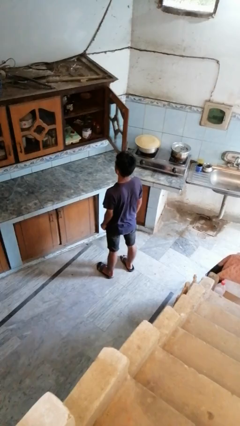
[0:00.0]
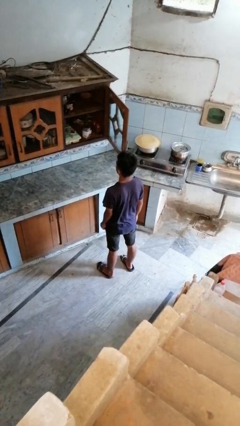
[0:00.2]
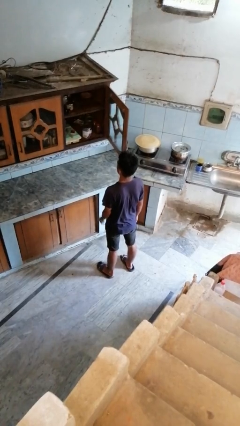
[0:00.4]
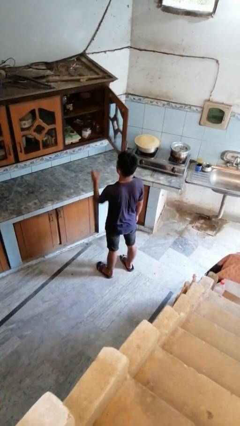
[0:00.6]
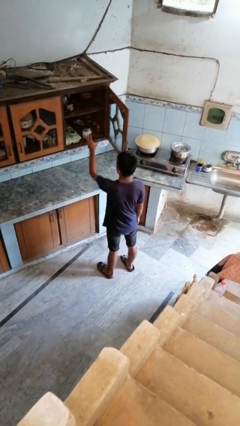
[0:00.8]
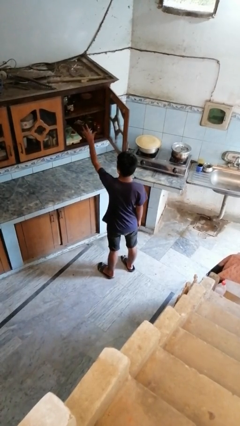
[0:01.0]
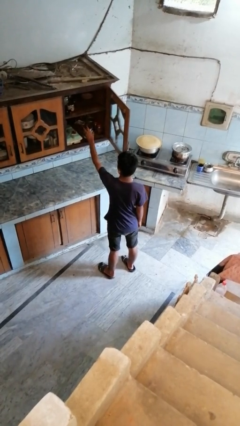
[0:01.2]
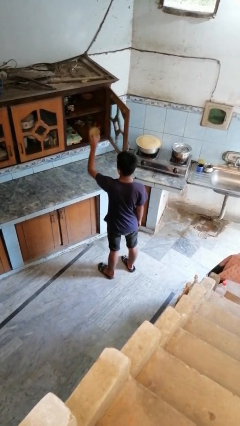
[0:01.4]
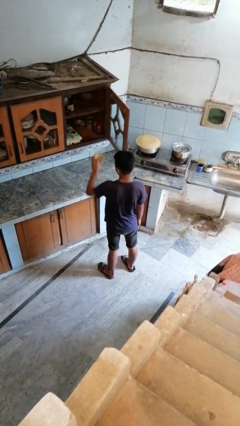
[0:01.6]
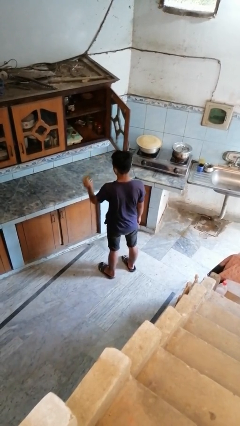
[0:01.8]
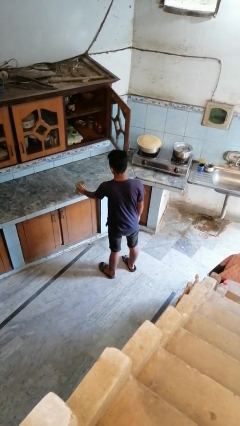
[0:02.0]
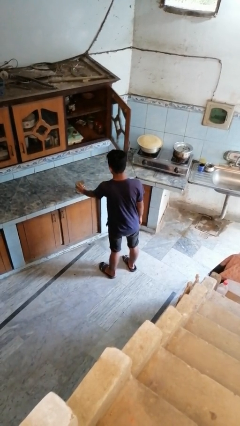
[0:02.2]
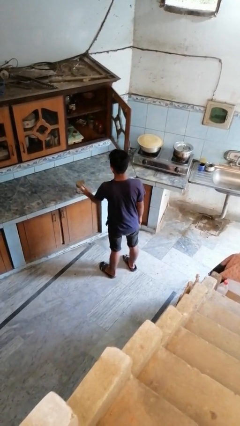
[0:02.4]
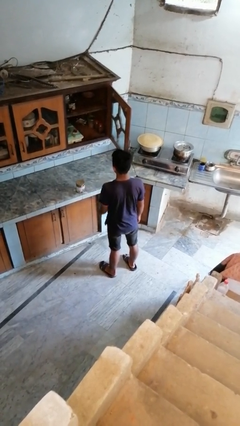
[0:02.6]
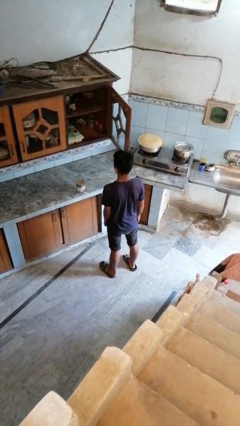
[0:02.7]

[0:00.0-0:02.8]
person takes object from cabinet

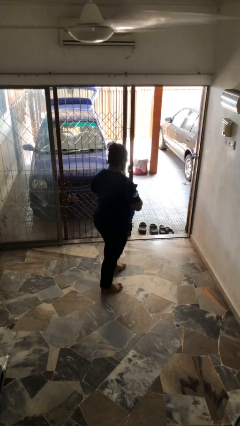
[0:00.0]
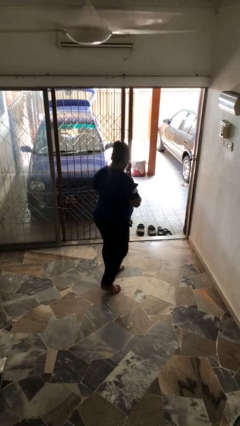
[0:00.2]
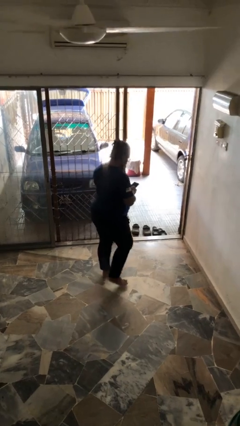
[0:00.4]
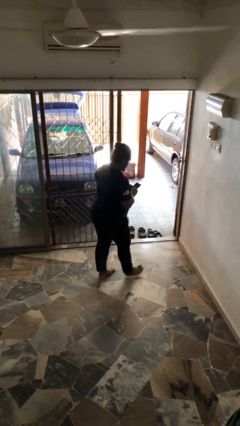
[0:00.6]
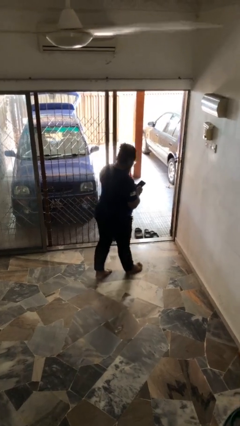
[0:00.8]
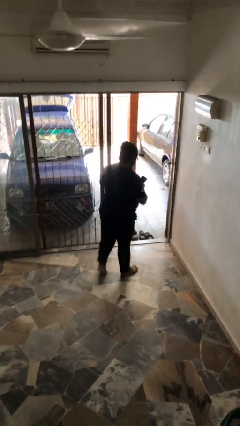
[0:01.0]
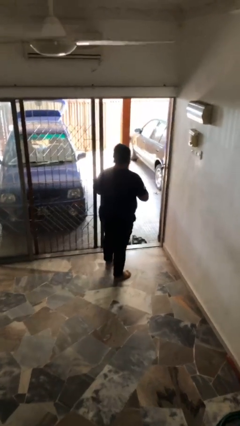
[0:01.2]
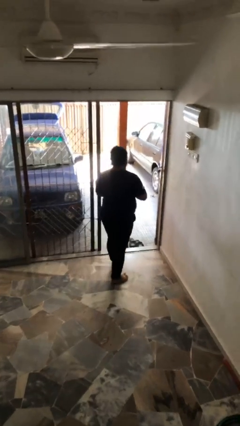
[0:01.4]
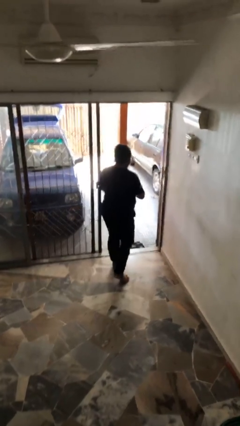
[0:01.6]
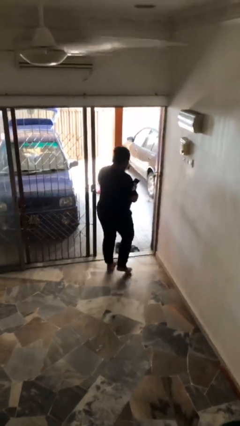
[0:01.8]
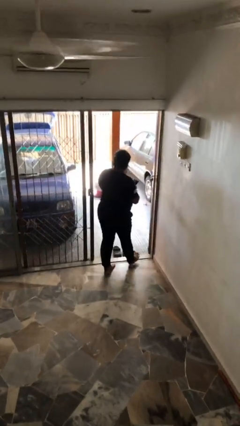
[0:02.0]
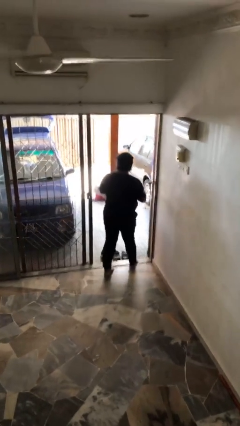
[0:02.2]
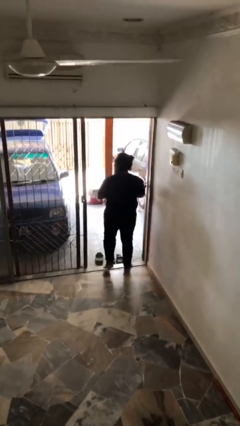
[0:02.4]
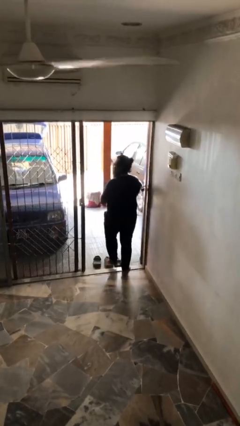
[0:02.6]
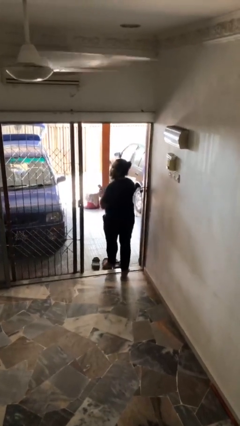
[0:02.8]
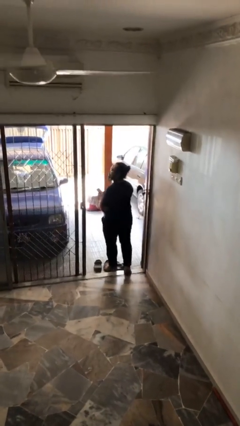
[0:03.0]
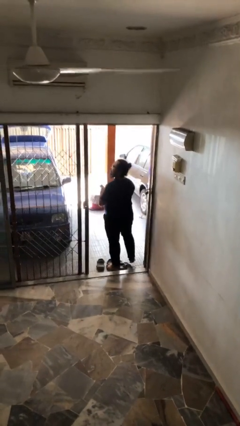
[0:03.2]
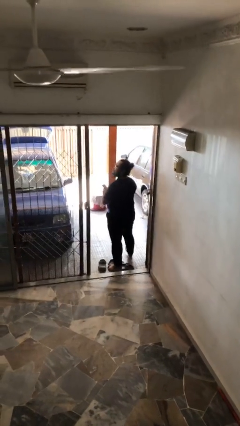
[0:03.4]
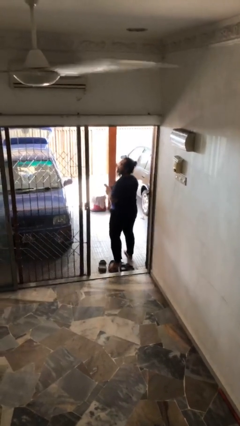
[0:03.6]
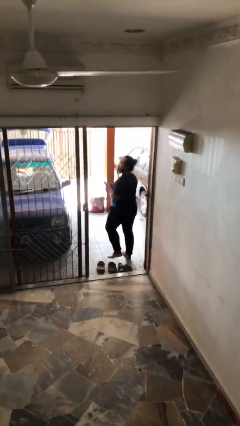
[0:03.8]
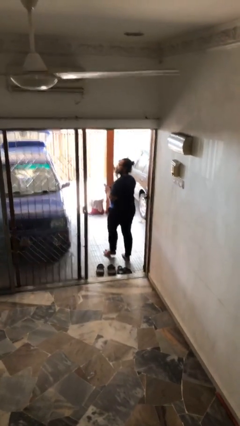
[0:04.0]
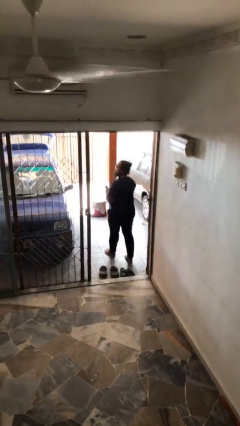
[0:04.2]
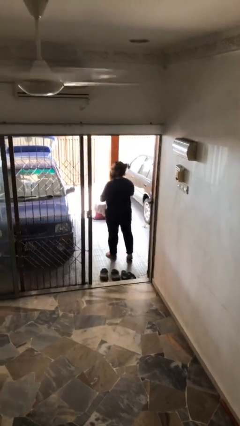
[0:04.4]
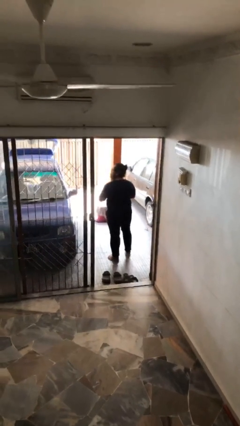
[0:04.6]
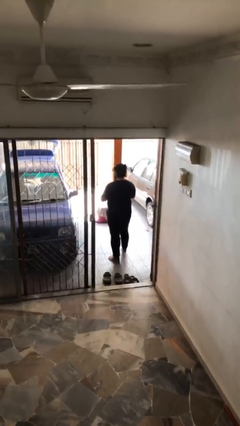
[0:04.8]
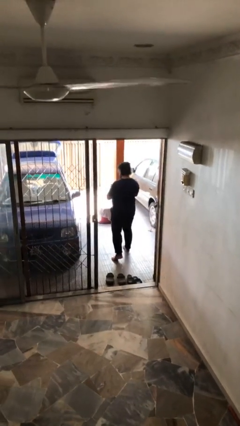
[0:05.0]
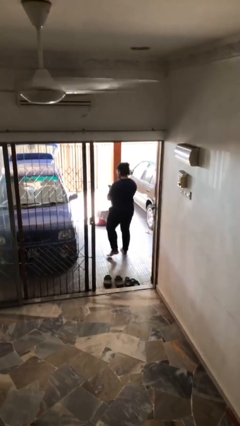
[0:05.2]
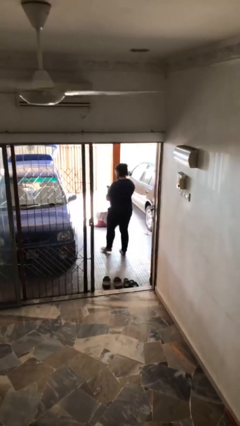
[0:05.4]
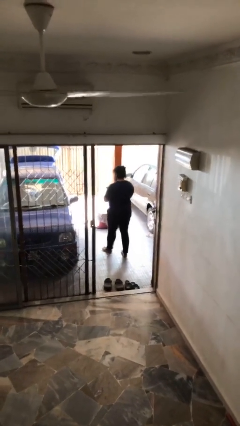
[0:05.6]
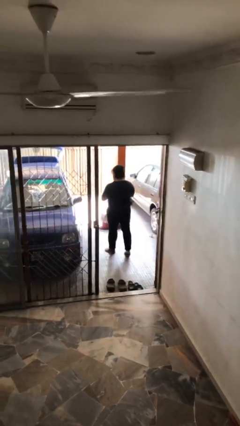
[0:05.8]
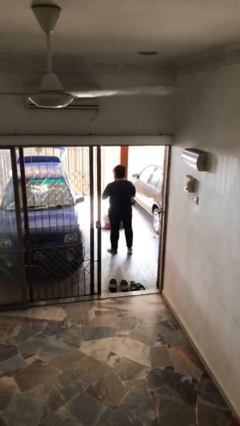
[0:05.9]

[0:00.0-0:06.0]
person texts on phone

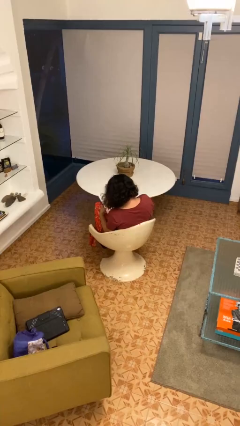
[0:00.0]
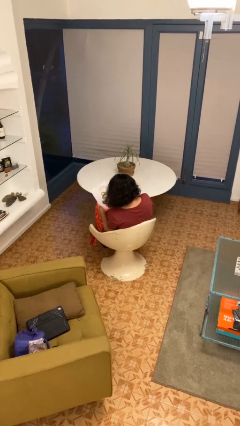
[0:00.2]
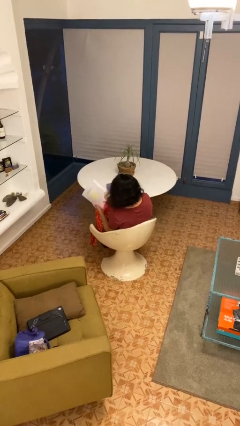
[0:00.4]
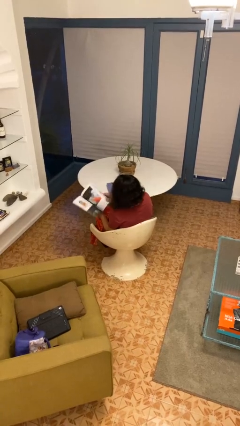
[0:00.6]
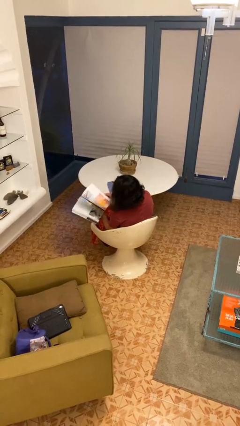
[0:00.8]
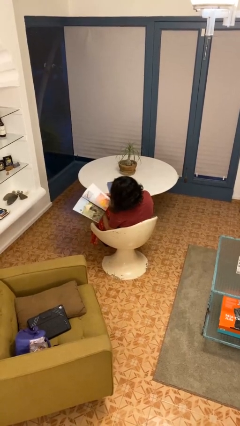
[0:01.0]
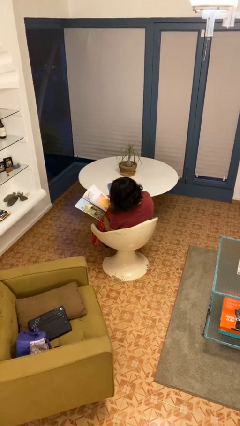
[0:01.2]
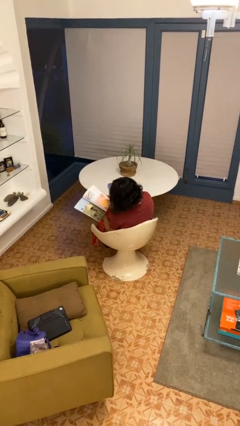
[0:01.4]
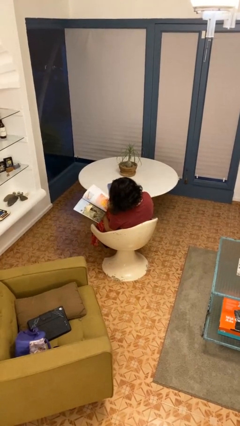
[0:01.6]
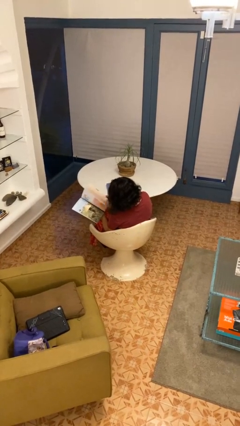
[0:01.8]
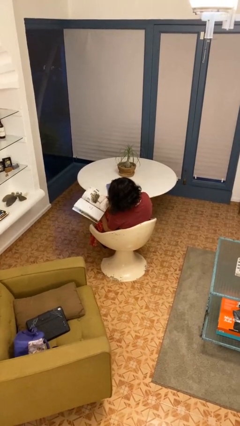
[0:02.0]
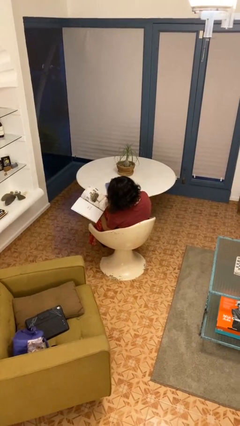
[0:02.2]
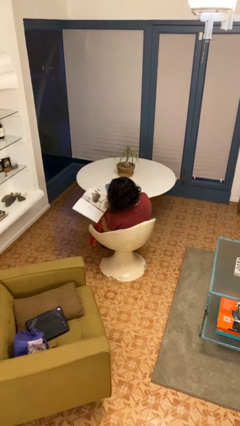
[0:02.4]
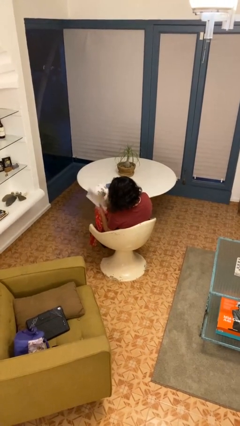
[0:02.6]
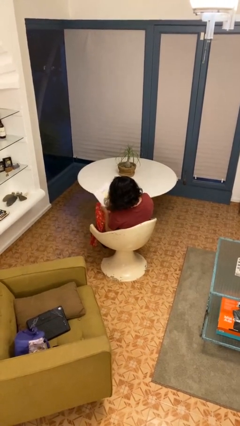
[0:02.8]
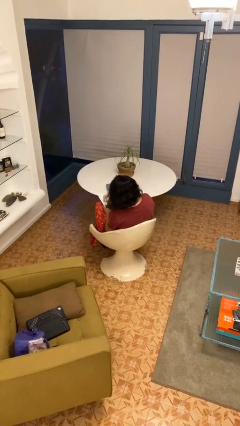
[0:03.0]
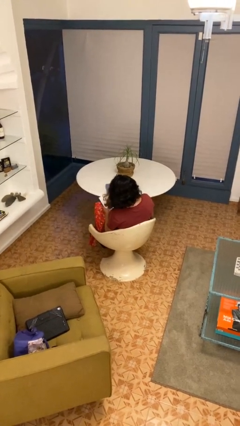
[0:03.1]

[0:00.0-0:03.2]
person reads magazine

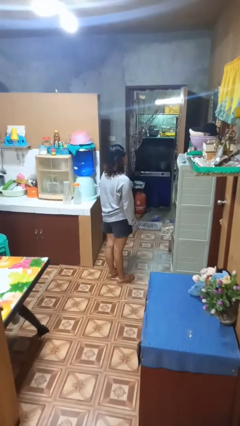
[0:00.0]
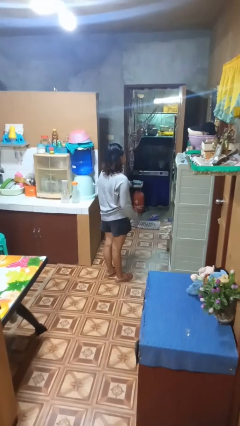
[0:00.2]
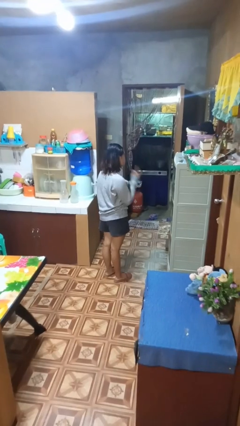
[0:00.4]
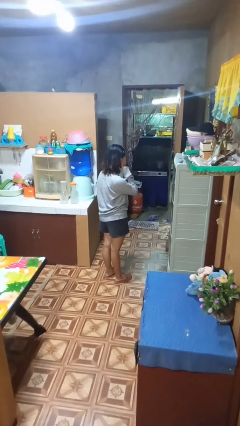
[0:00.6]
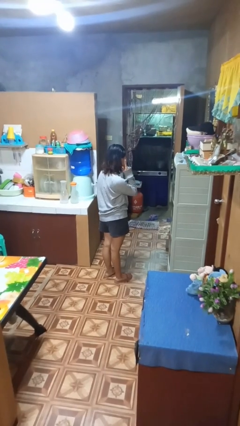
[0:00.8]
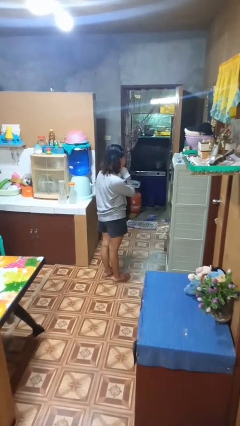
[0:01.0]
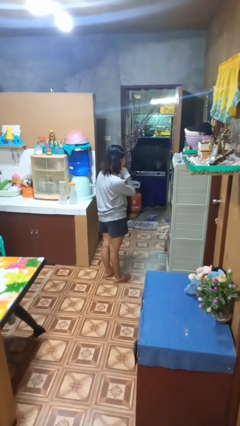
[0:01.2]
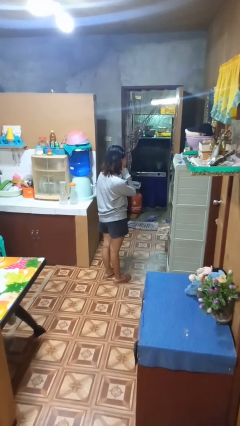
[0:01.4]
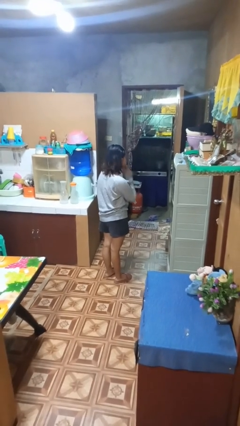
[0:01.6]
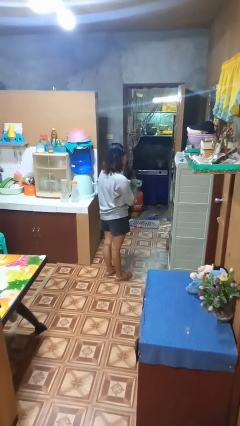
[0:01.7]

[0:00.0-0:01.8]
person gestures listen closely

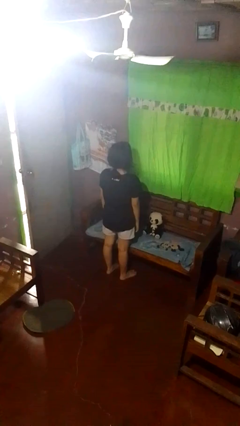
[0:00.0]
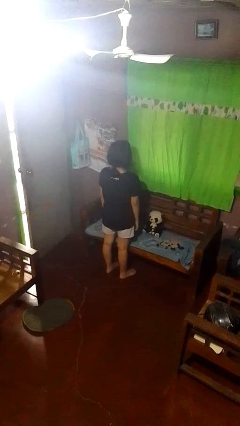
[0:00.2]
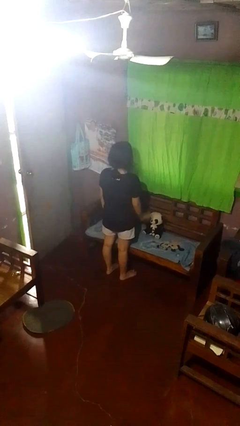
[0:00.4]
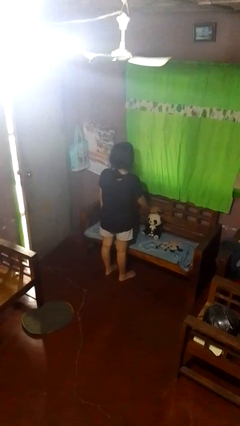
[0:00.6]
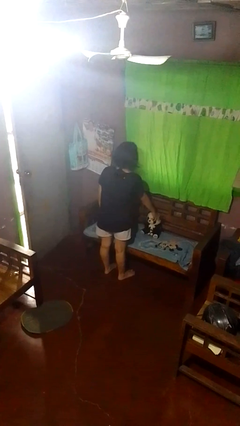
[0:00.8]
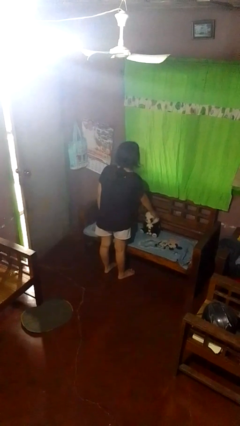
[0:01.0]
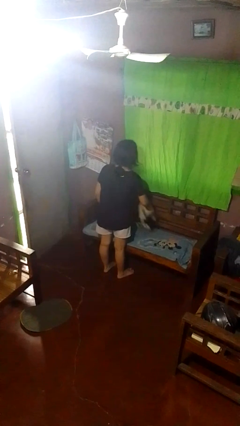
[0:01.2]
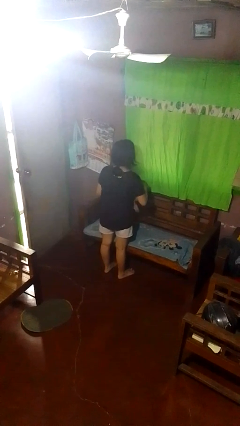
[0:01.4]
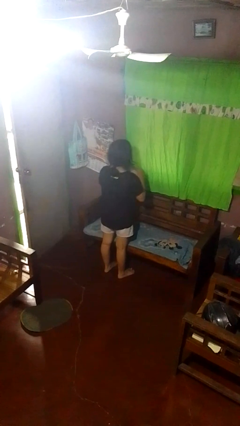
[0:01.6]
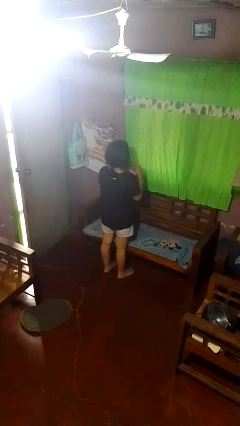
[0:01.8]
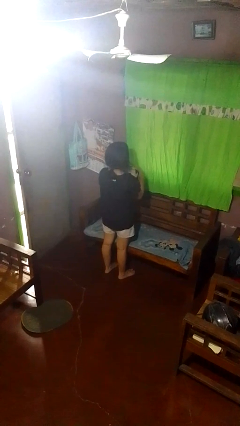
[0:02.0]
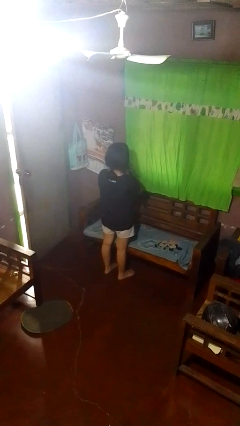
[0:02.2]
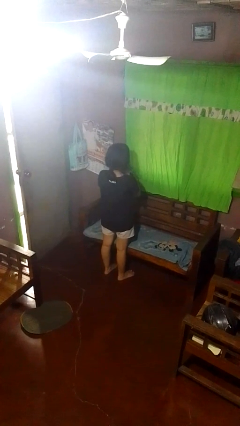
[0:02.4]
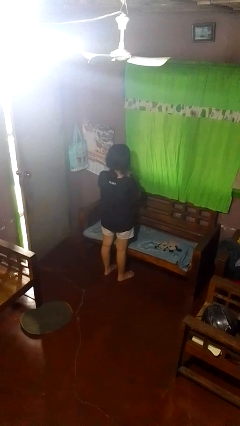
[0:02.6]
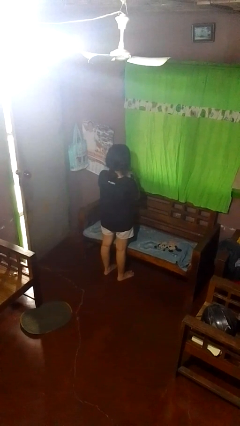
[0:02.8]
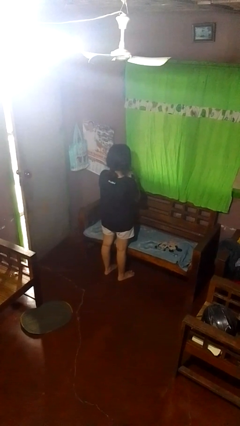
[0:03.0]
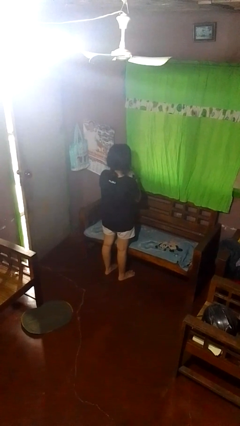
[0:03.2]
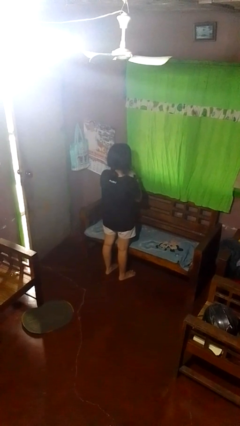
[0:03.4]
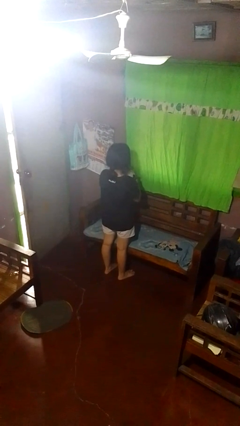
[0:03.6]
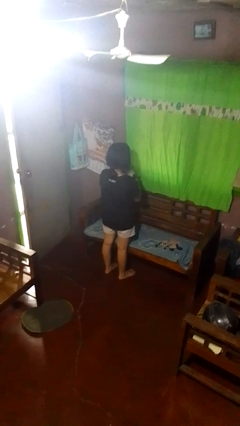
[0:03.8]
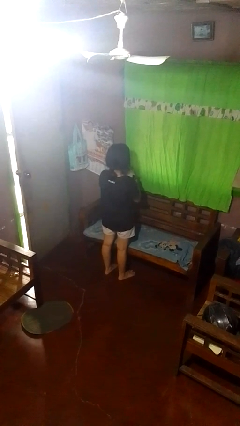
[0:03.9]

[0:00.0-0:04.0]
person picks up object from couch
